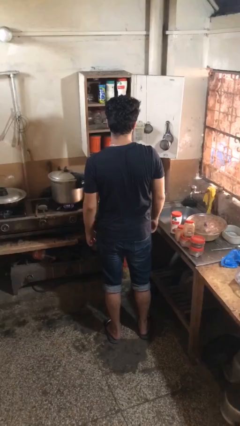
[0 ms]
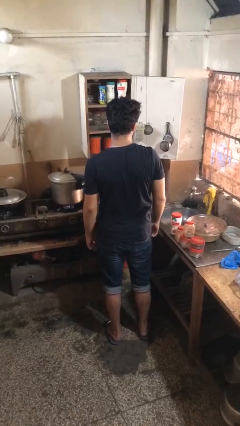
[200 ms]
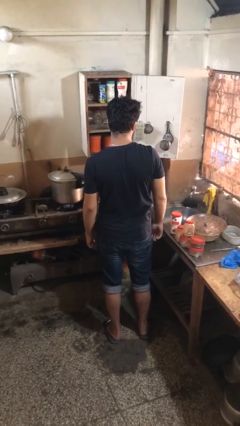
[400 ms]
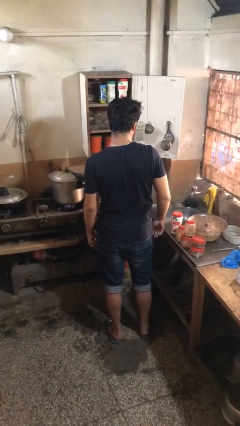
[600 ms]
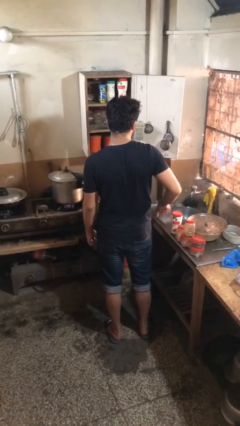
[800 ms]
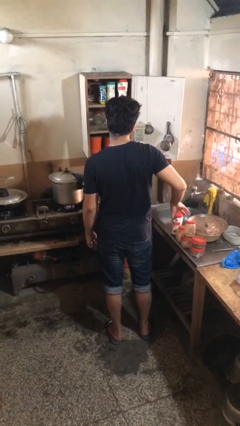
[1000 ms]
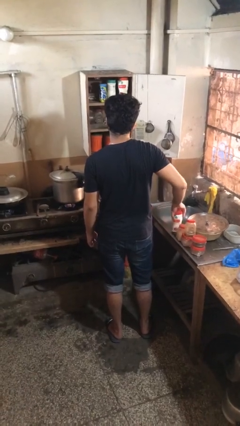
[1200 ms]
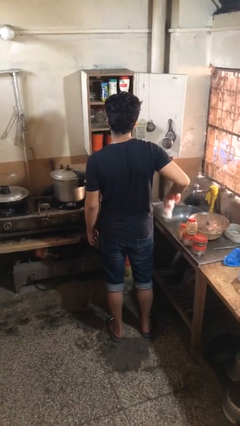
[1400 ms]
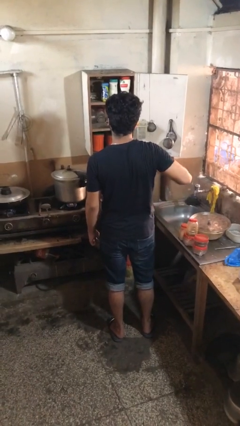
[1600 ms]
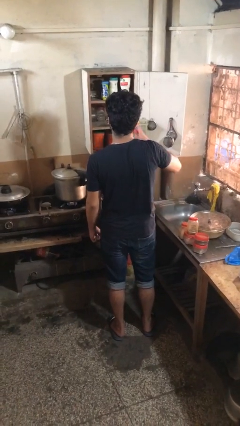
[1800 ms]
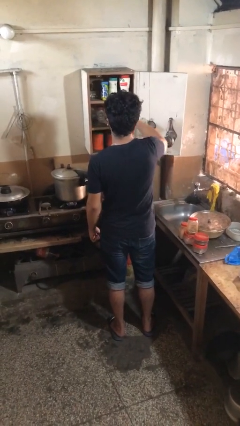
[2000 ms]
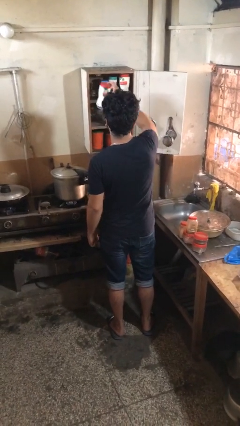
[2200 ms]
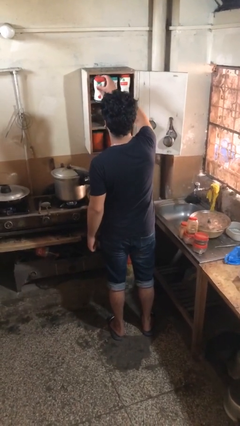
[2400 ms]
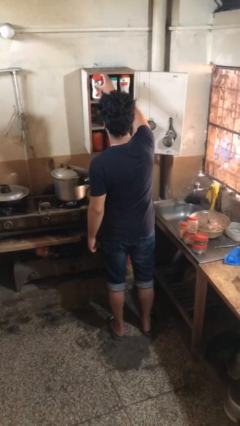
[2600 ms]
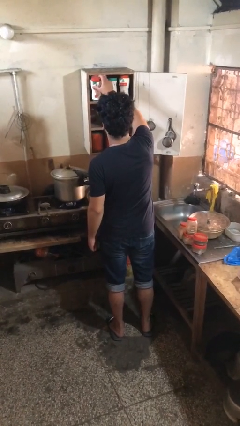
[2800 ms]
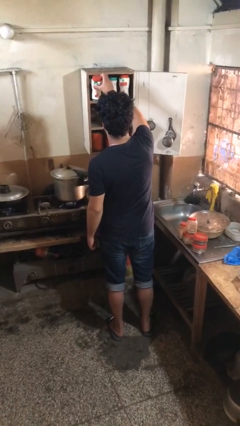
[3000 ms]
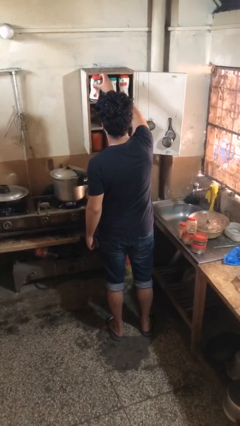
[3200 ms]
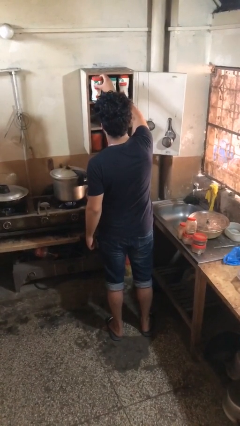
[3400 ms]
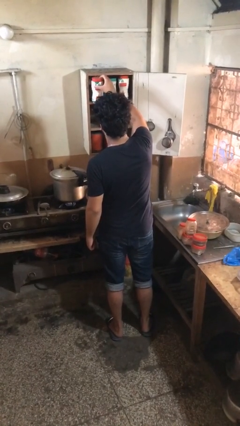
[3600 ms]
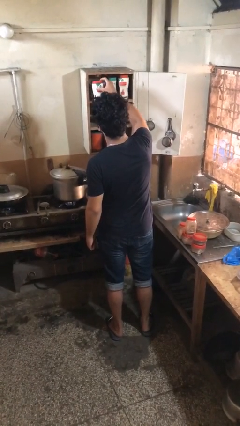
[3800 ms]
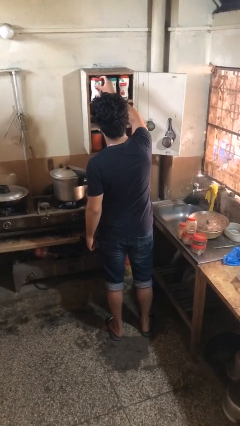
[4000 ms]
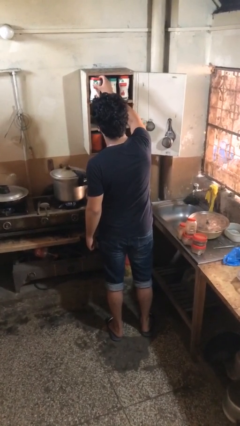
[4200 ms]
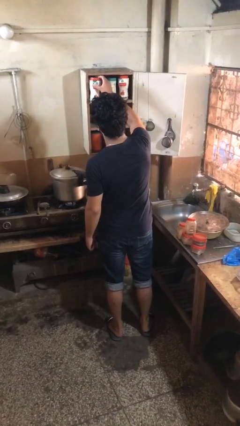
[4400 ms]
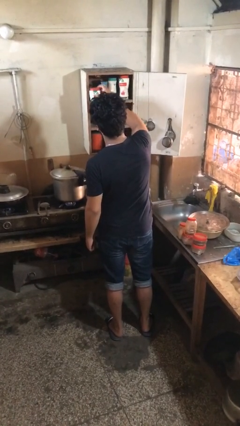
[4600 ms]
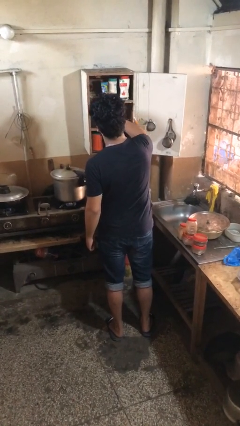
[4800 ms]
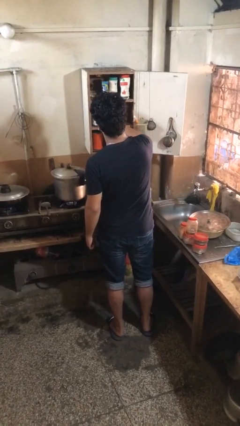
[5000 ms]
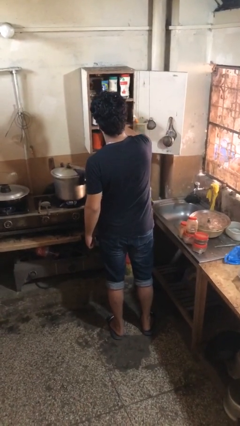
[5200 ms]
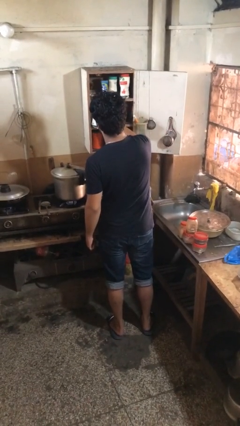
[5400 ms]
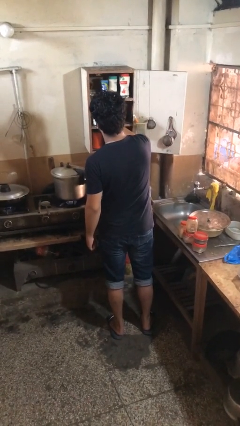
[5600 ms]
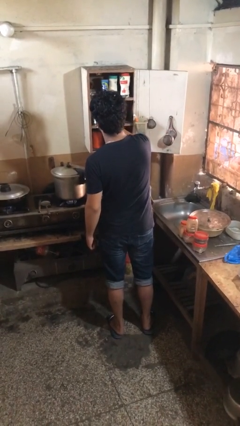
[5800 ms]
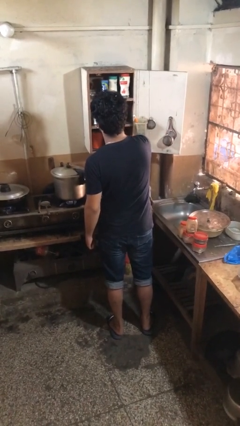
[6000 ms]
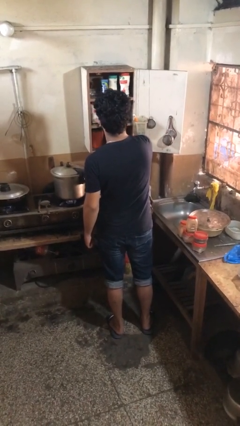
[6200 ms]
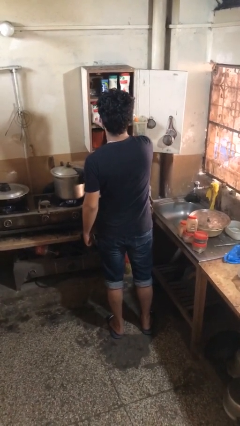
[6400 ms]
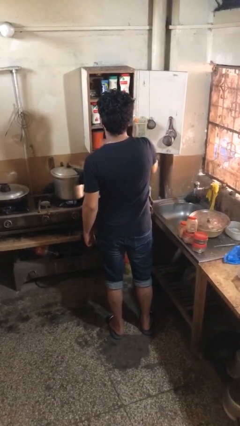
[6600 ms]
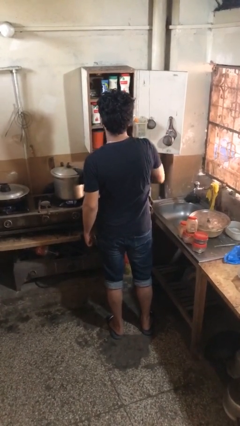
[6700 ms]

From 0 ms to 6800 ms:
person loads groceries into cabinet

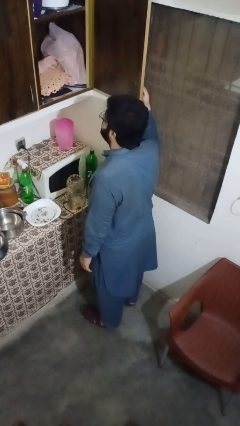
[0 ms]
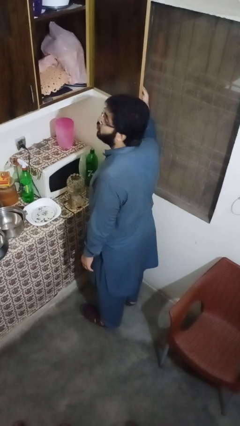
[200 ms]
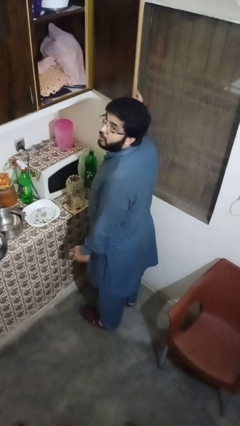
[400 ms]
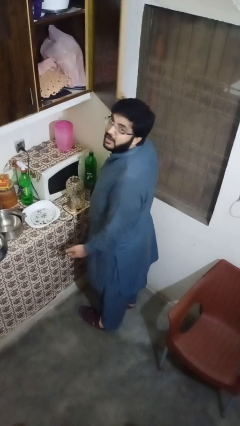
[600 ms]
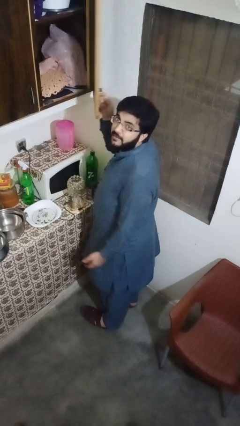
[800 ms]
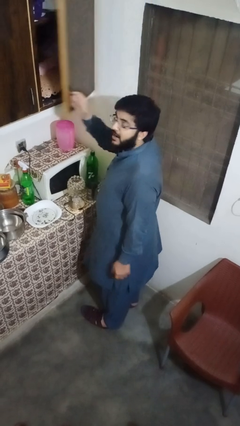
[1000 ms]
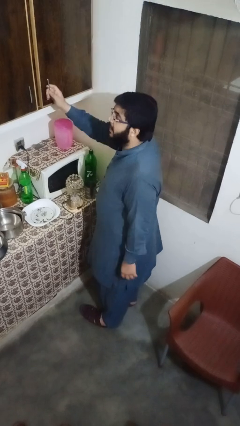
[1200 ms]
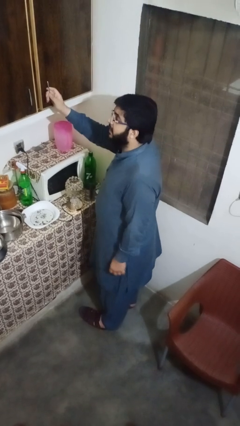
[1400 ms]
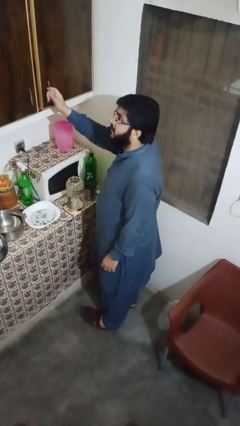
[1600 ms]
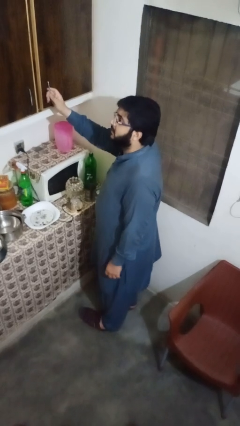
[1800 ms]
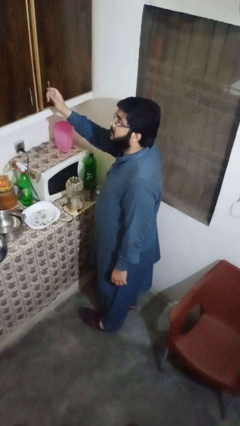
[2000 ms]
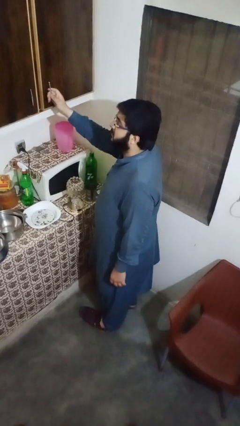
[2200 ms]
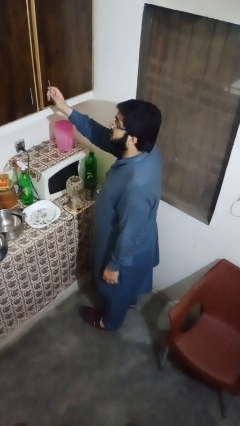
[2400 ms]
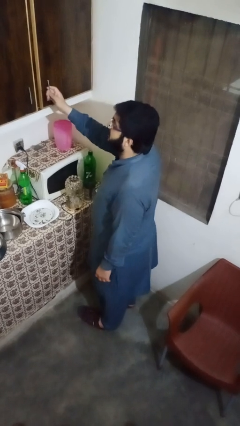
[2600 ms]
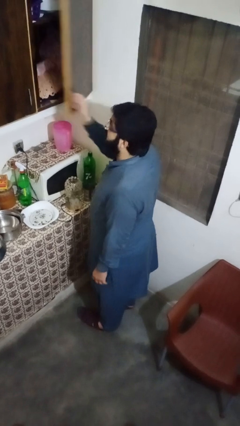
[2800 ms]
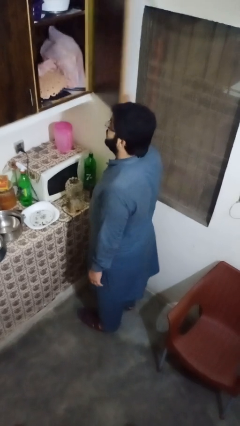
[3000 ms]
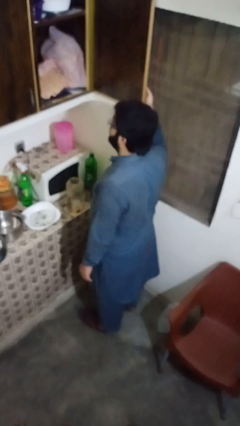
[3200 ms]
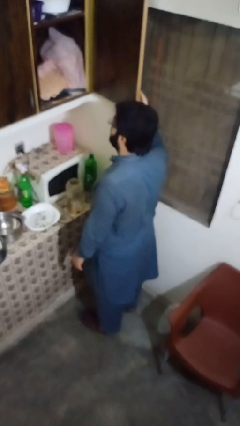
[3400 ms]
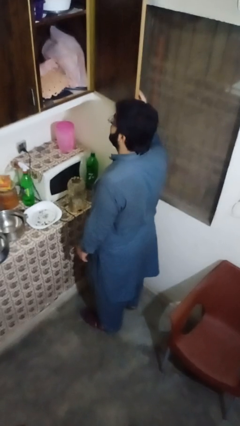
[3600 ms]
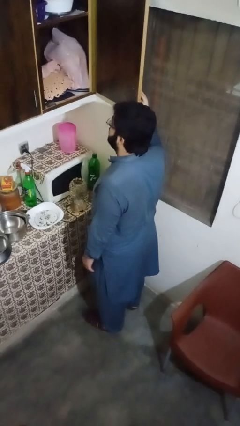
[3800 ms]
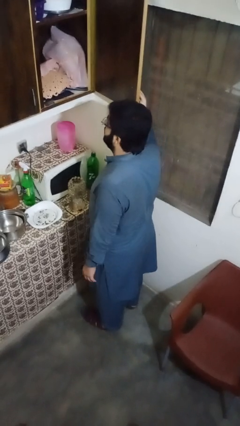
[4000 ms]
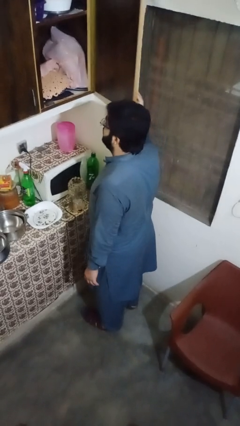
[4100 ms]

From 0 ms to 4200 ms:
person closes cabinet

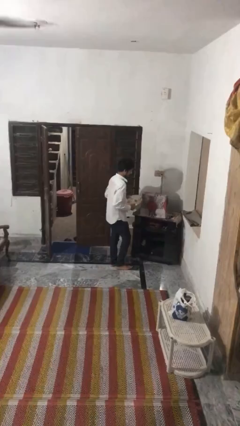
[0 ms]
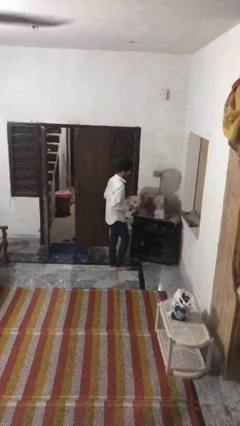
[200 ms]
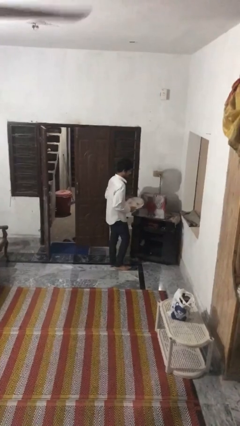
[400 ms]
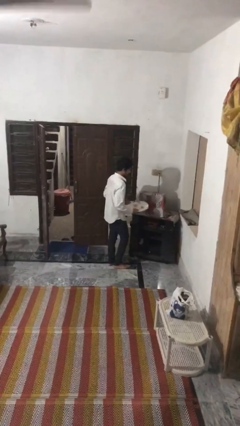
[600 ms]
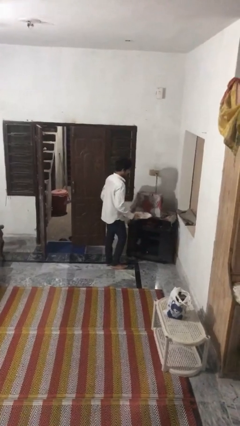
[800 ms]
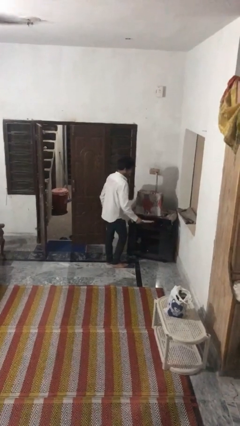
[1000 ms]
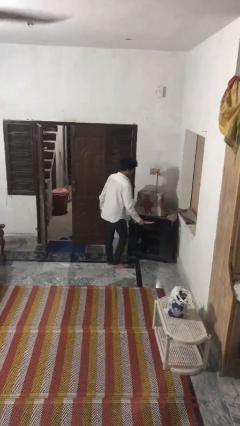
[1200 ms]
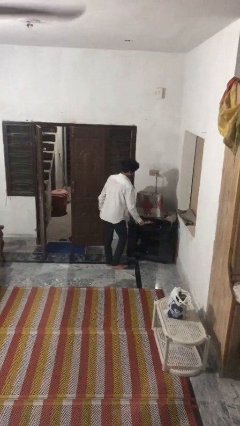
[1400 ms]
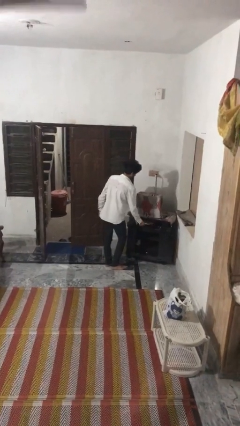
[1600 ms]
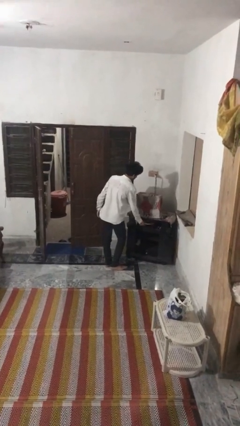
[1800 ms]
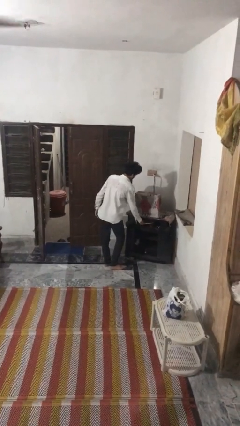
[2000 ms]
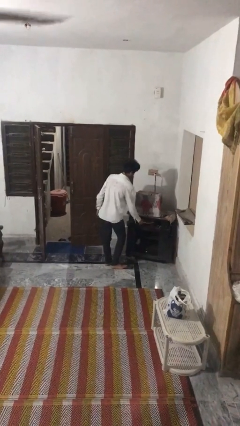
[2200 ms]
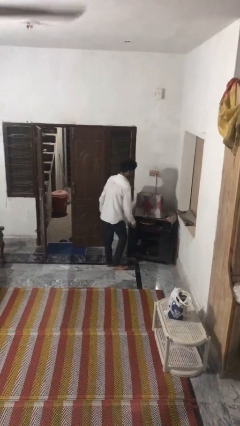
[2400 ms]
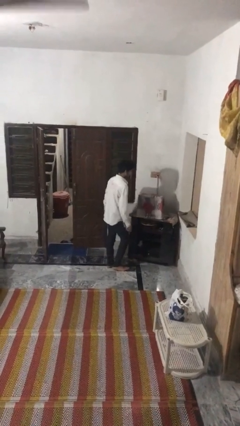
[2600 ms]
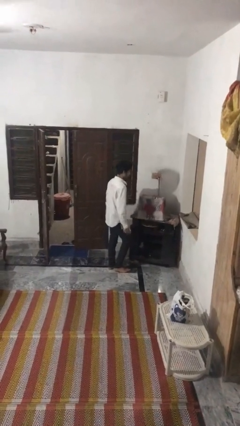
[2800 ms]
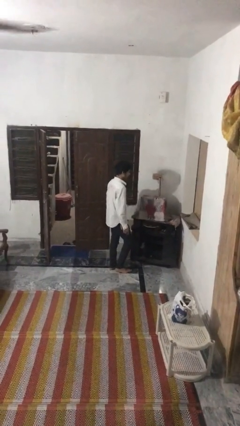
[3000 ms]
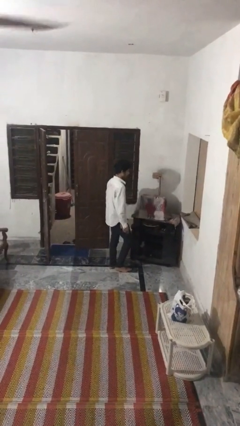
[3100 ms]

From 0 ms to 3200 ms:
person puts down object into cabinet

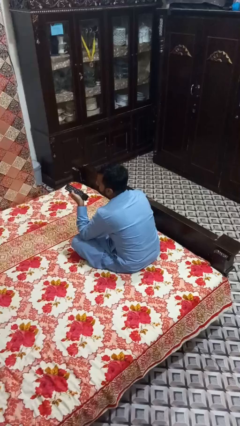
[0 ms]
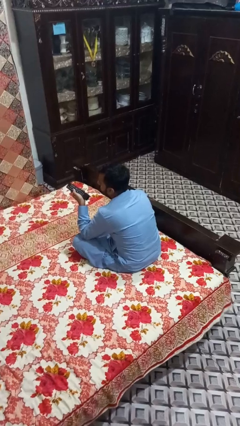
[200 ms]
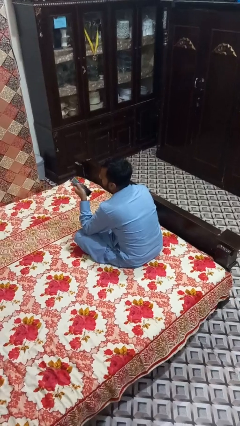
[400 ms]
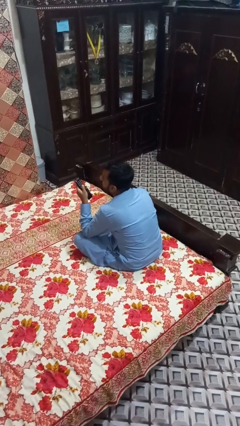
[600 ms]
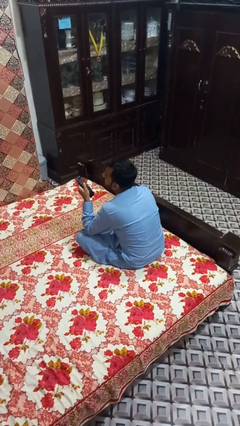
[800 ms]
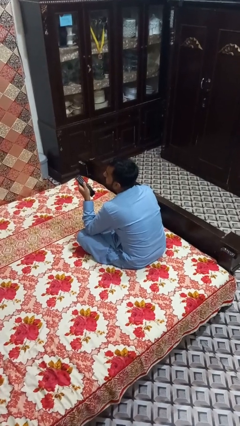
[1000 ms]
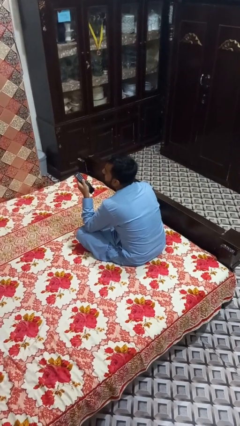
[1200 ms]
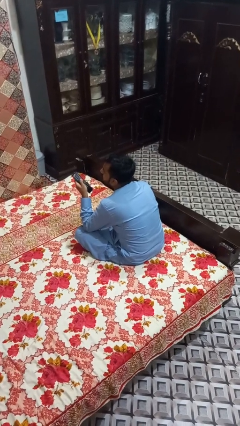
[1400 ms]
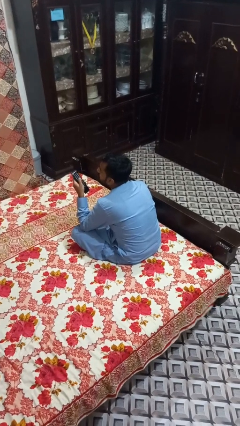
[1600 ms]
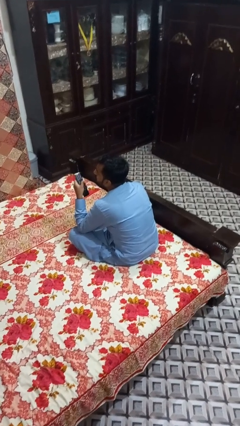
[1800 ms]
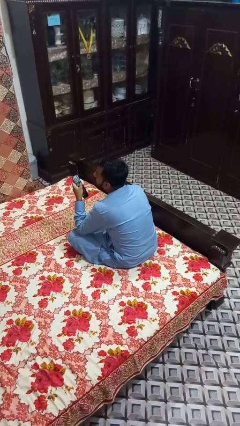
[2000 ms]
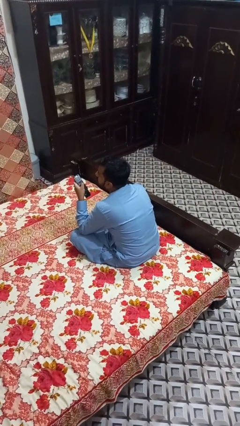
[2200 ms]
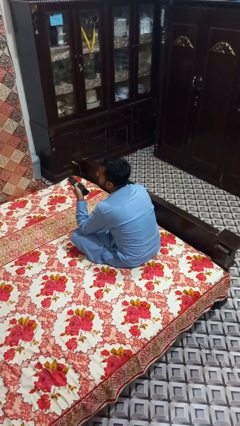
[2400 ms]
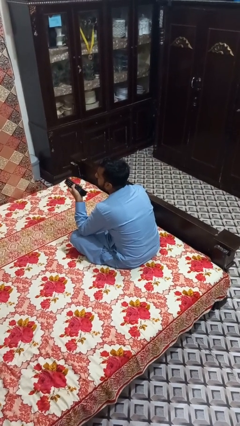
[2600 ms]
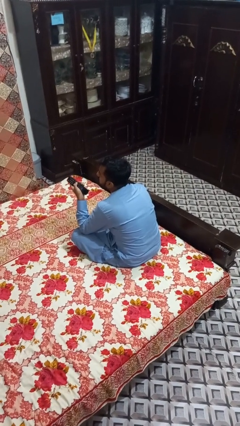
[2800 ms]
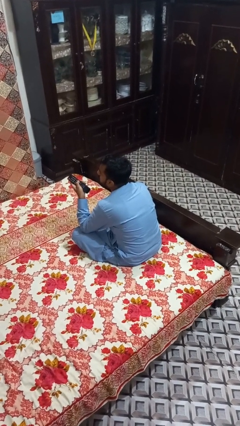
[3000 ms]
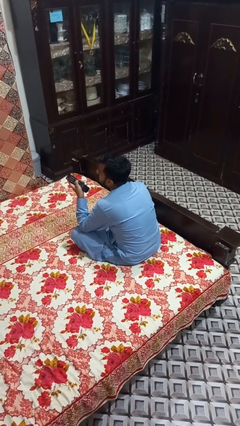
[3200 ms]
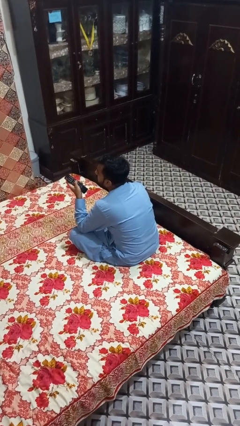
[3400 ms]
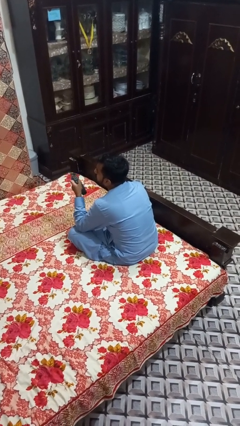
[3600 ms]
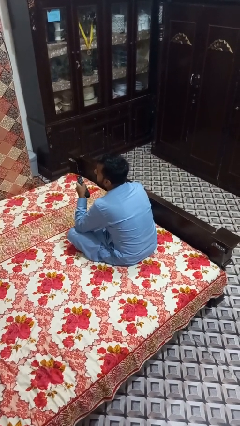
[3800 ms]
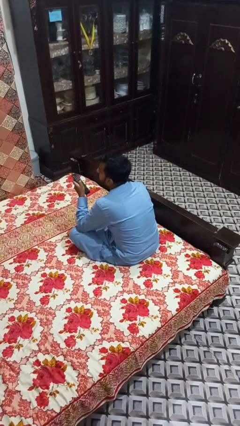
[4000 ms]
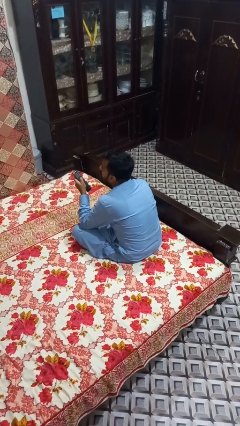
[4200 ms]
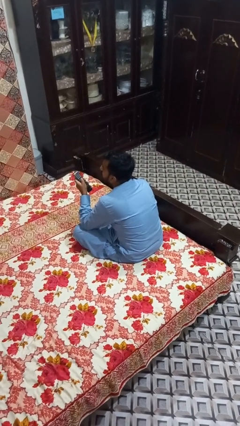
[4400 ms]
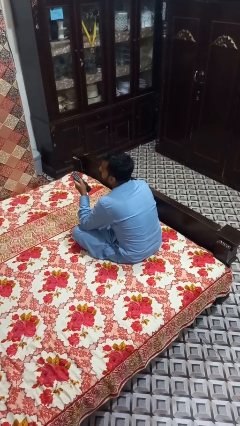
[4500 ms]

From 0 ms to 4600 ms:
person uses television remote
